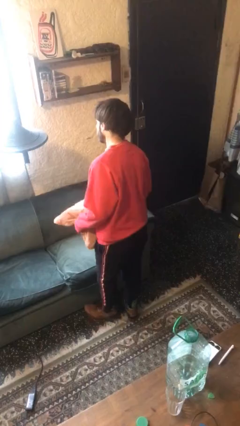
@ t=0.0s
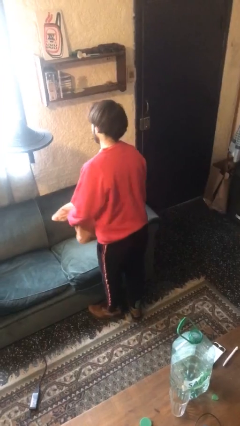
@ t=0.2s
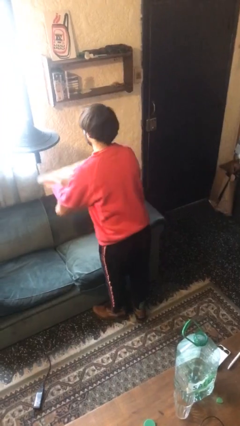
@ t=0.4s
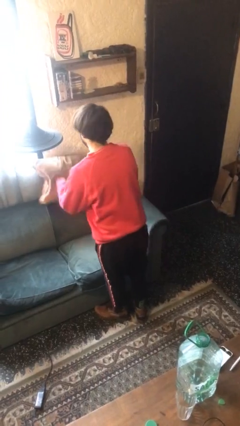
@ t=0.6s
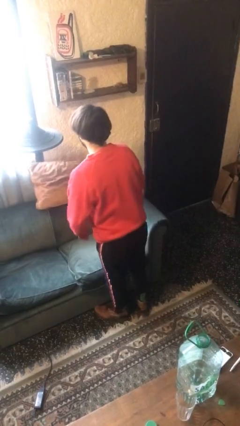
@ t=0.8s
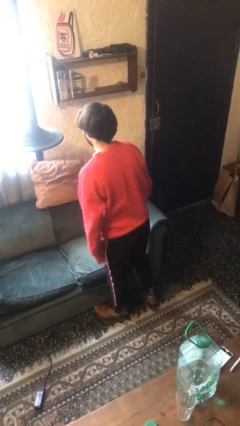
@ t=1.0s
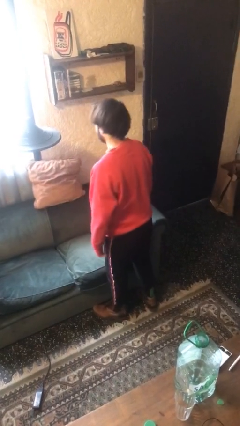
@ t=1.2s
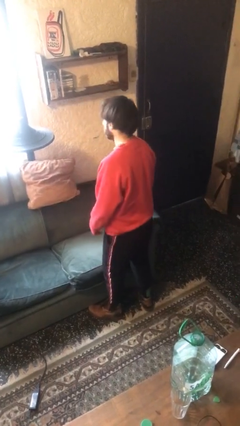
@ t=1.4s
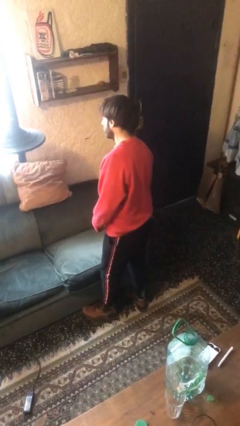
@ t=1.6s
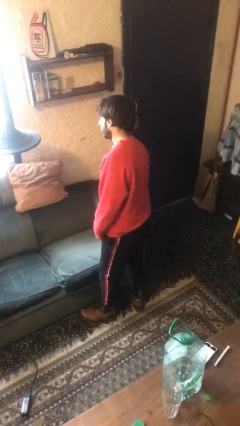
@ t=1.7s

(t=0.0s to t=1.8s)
person puts down object on couch

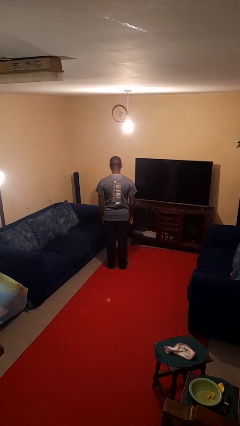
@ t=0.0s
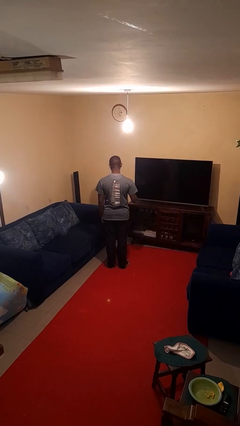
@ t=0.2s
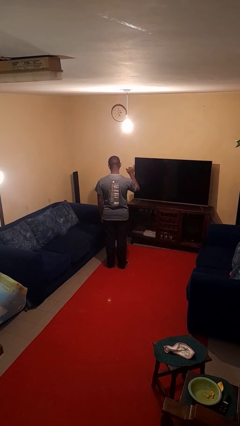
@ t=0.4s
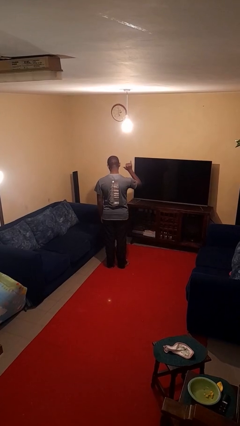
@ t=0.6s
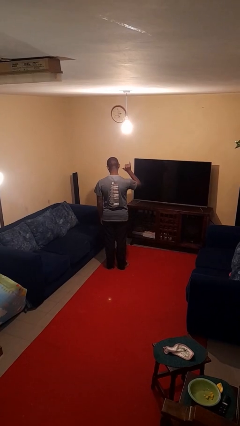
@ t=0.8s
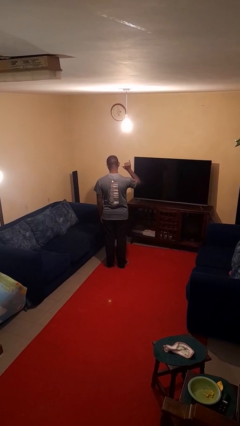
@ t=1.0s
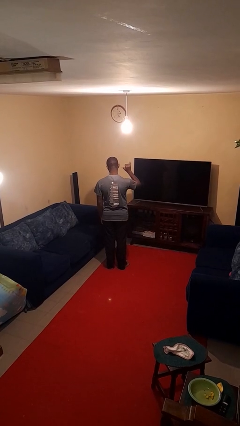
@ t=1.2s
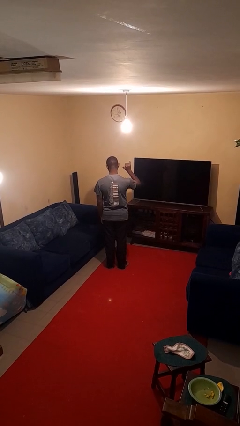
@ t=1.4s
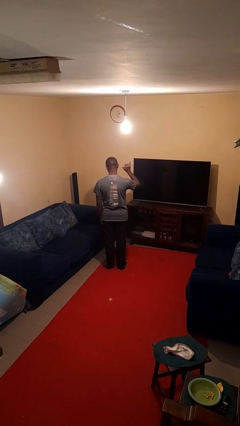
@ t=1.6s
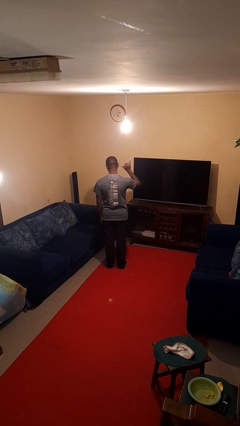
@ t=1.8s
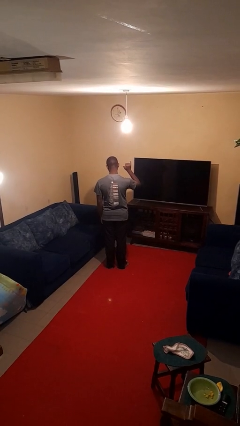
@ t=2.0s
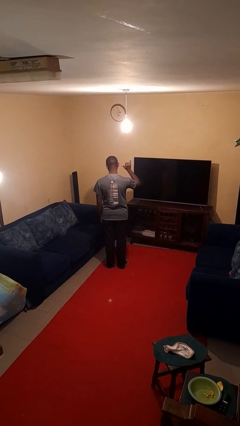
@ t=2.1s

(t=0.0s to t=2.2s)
person gestures hang loose

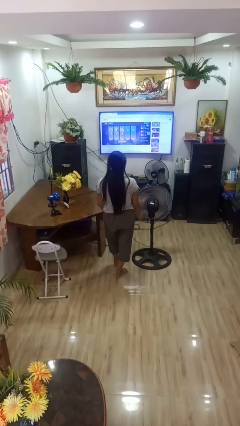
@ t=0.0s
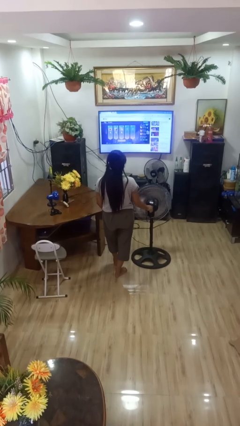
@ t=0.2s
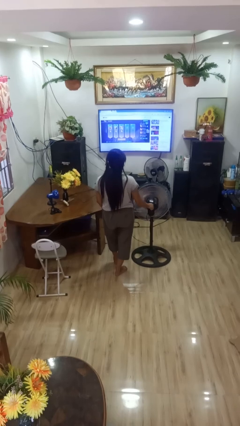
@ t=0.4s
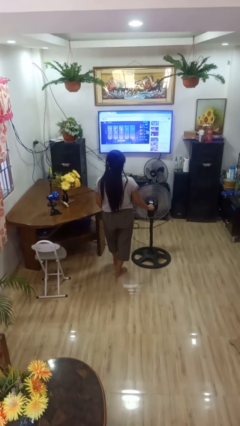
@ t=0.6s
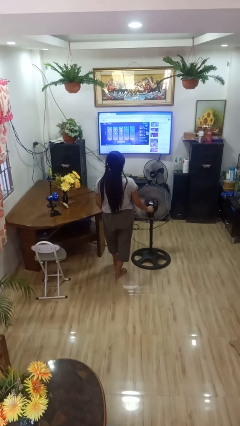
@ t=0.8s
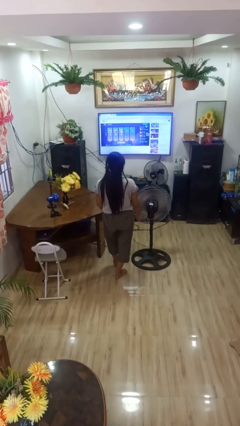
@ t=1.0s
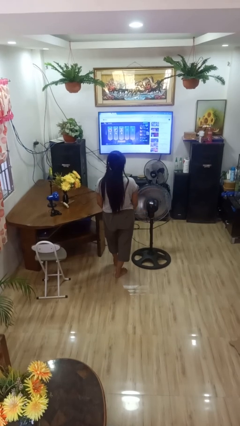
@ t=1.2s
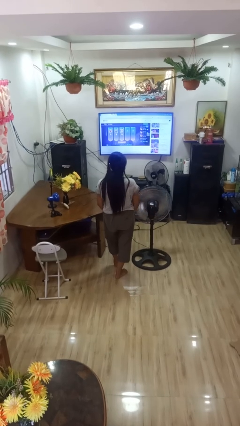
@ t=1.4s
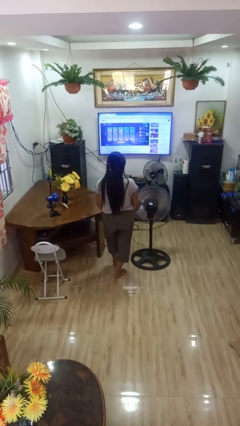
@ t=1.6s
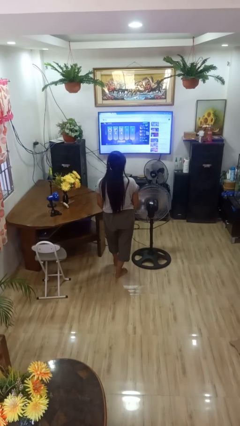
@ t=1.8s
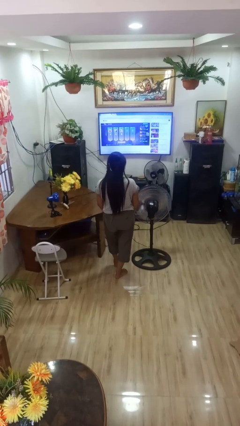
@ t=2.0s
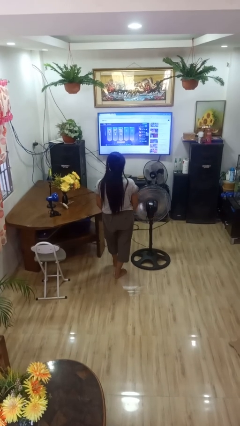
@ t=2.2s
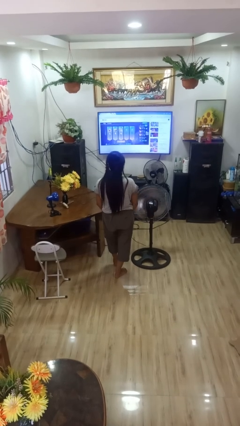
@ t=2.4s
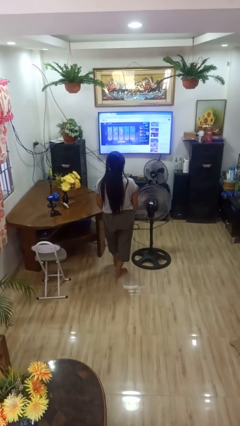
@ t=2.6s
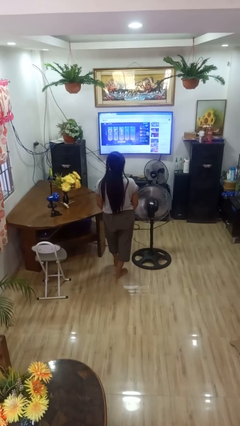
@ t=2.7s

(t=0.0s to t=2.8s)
person turns off fan

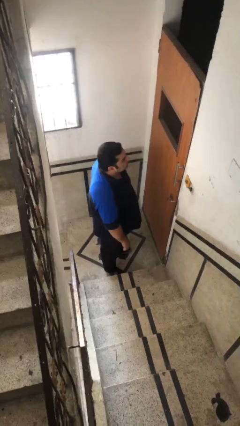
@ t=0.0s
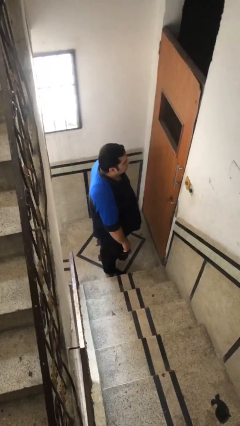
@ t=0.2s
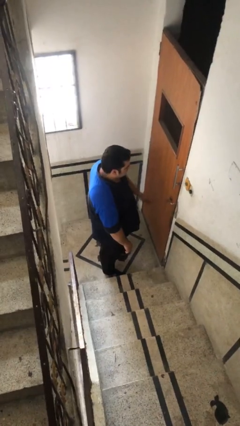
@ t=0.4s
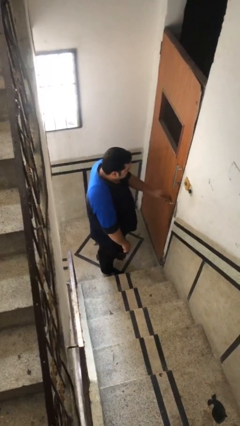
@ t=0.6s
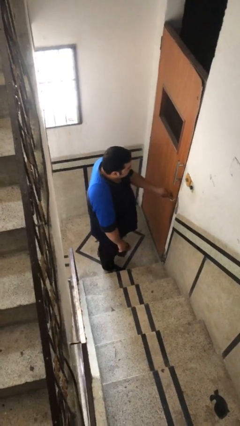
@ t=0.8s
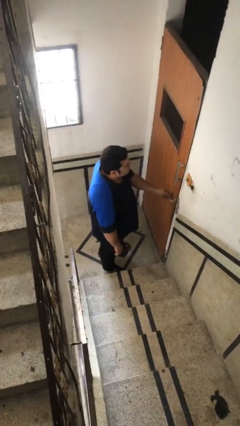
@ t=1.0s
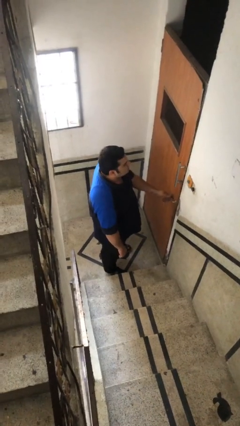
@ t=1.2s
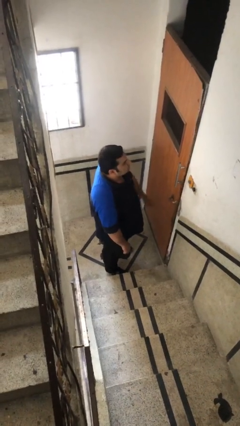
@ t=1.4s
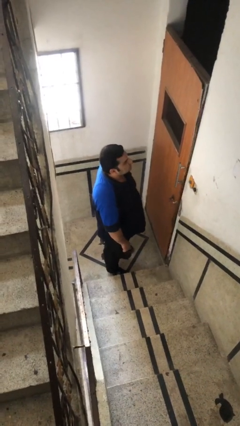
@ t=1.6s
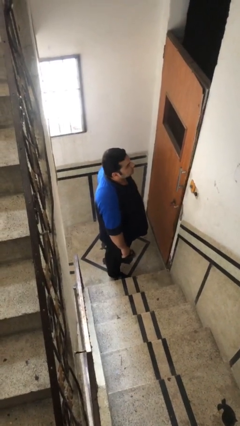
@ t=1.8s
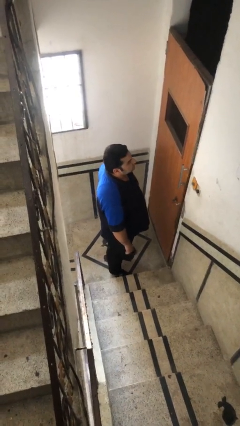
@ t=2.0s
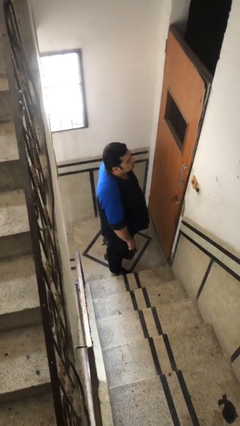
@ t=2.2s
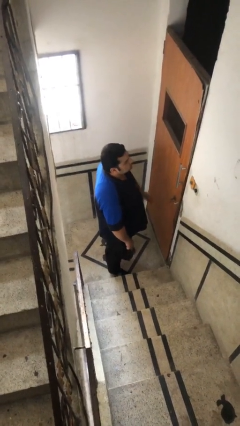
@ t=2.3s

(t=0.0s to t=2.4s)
person unlocks door with keys

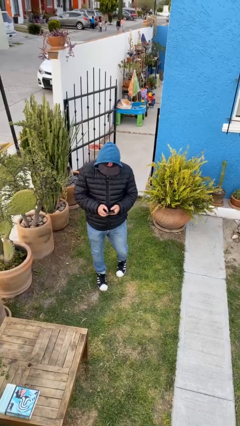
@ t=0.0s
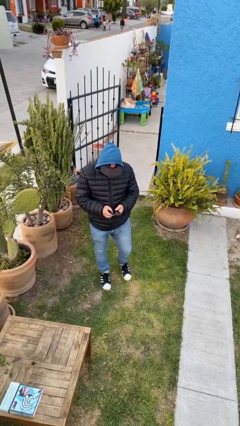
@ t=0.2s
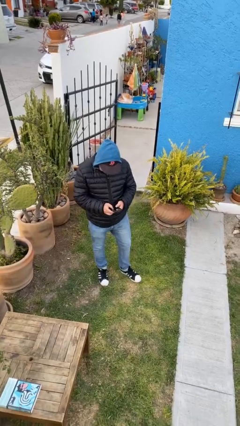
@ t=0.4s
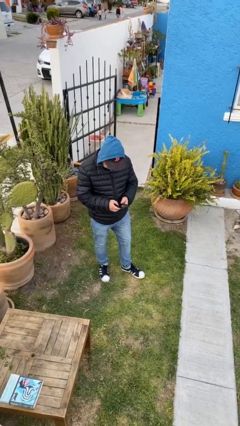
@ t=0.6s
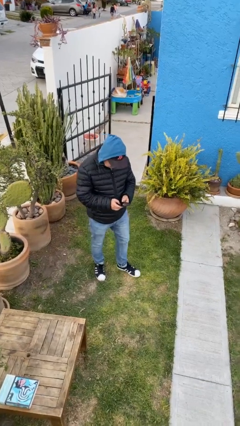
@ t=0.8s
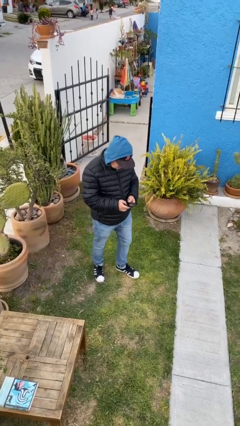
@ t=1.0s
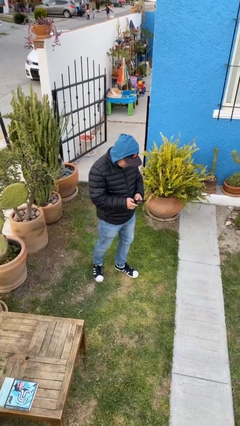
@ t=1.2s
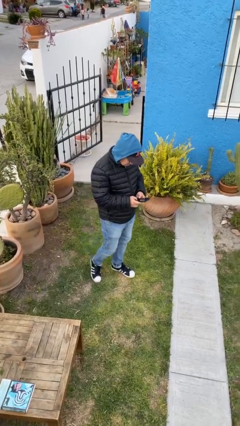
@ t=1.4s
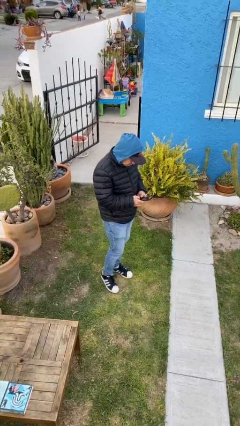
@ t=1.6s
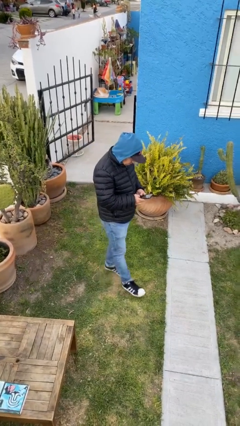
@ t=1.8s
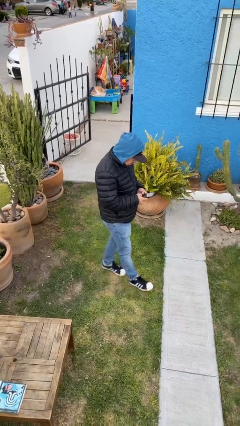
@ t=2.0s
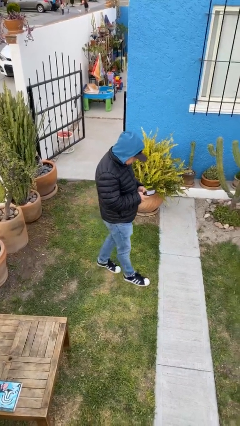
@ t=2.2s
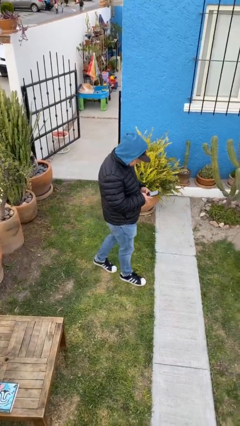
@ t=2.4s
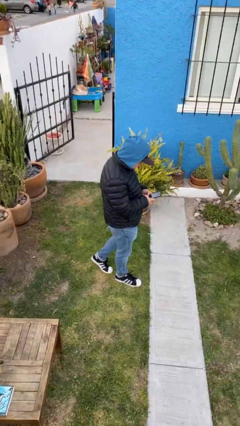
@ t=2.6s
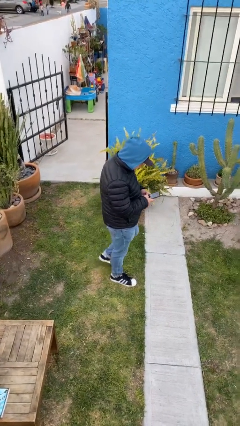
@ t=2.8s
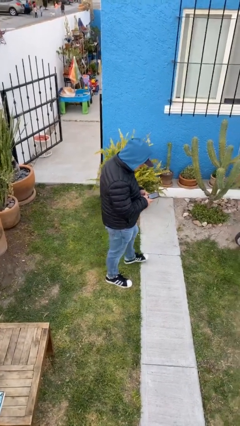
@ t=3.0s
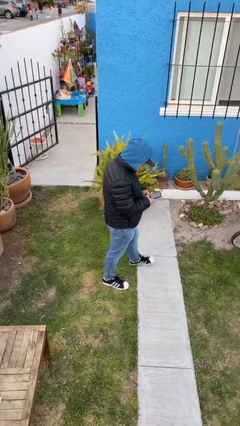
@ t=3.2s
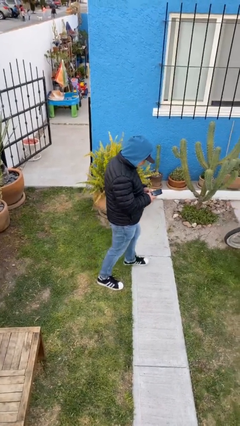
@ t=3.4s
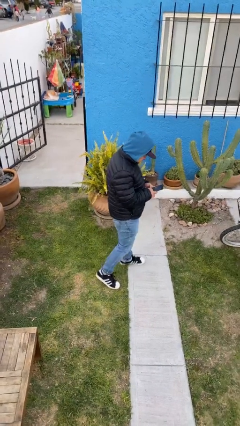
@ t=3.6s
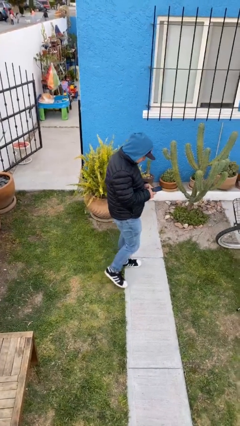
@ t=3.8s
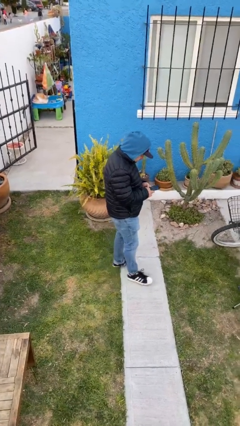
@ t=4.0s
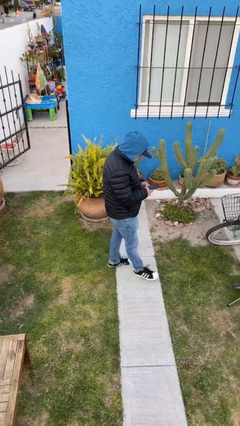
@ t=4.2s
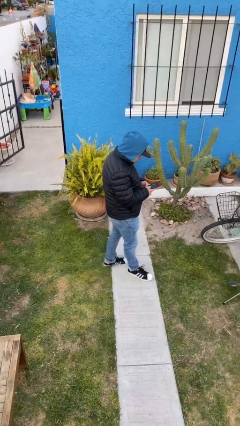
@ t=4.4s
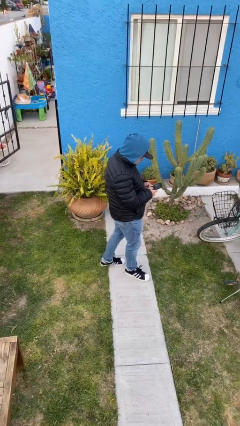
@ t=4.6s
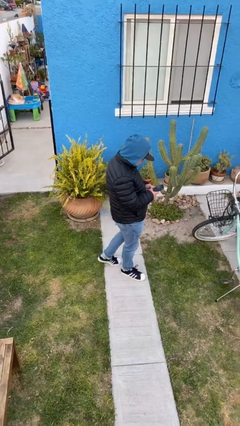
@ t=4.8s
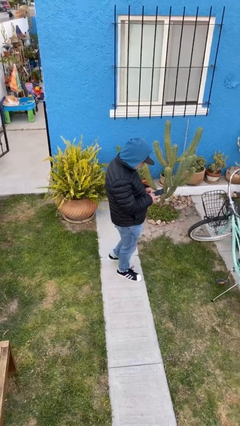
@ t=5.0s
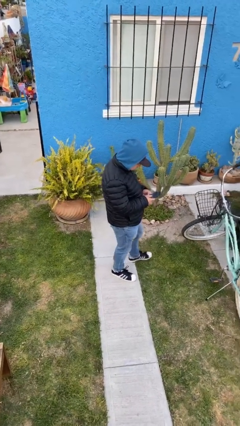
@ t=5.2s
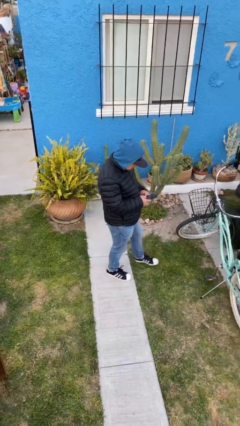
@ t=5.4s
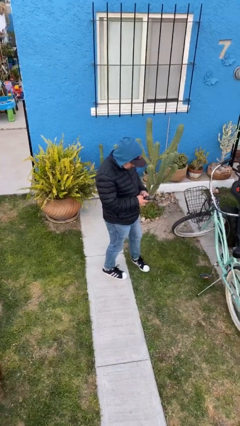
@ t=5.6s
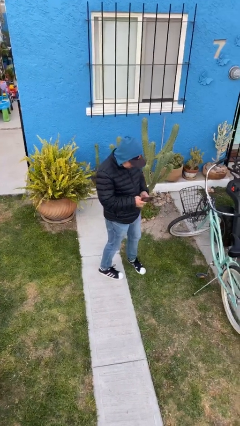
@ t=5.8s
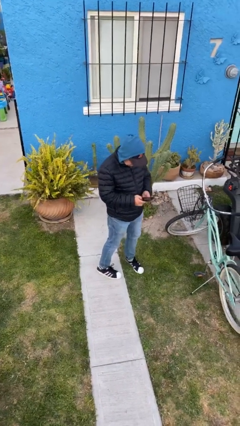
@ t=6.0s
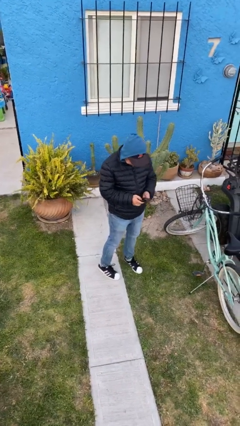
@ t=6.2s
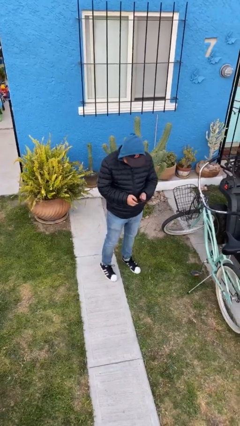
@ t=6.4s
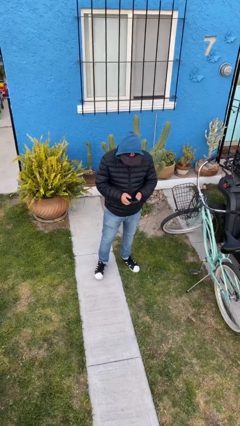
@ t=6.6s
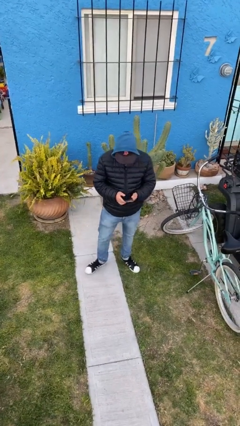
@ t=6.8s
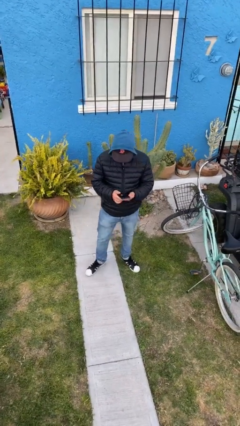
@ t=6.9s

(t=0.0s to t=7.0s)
person texts on phone

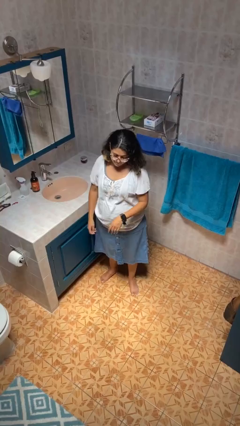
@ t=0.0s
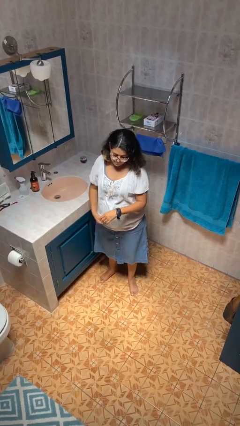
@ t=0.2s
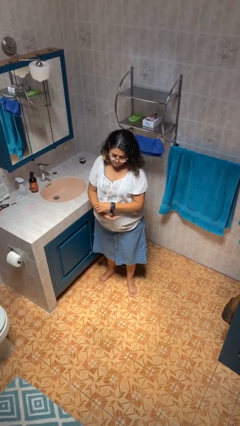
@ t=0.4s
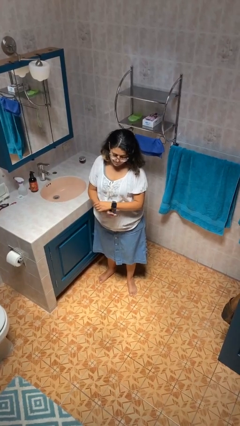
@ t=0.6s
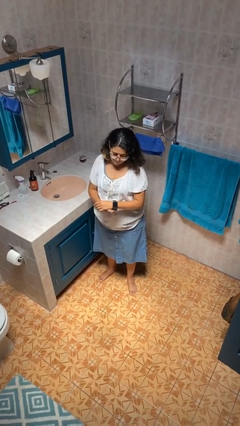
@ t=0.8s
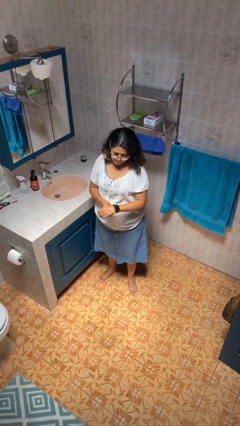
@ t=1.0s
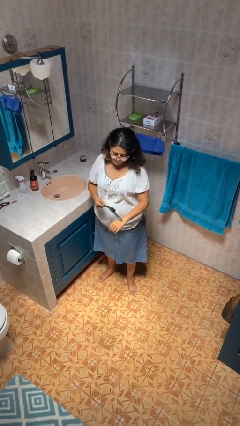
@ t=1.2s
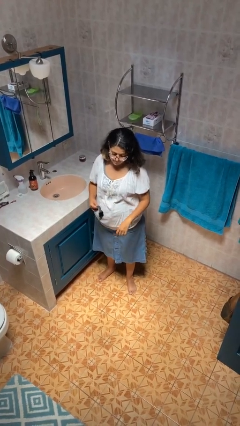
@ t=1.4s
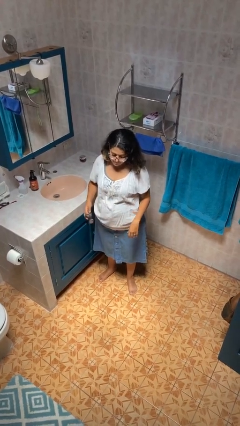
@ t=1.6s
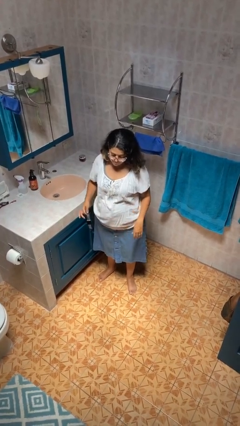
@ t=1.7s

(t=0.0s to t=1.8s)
person takes off wristwatch
